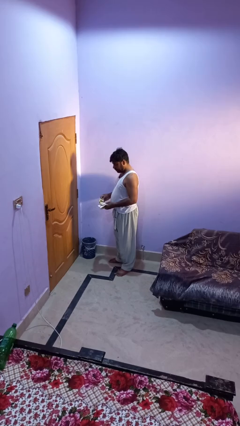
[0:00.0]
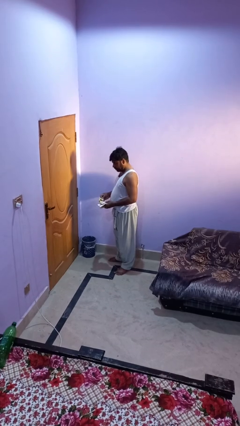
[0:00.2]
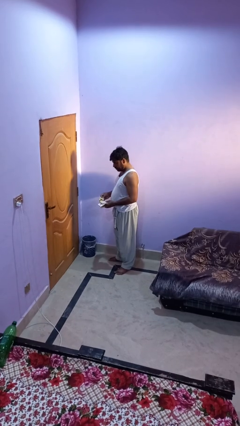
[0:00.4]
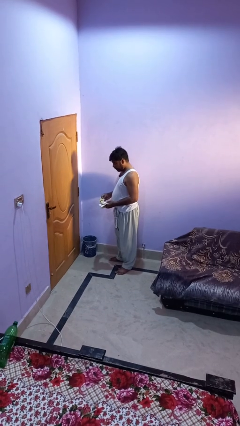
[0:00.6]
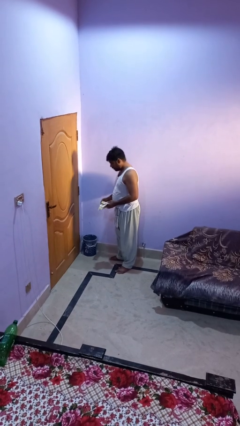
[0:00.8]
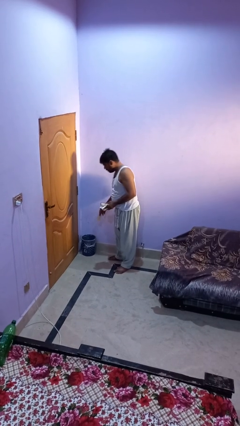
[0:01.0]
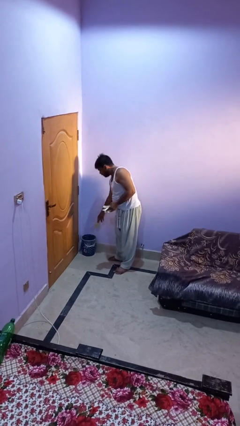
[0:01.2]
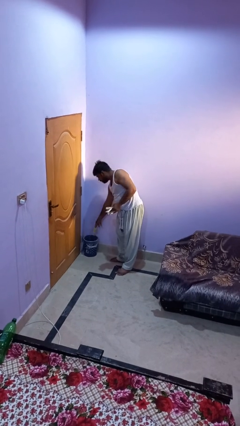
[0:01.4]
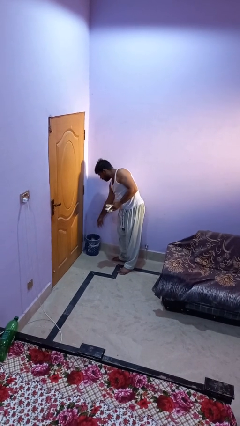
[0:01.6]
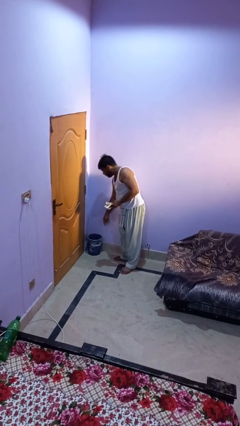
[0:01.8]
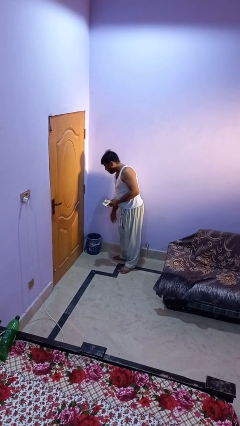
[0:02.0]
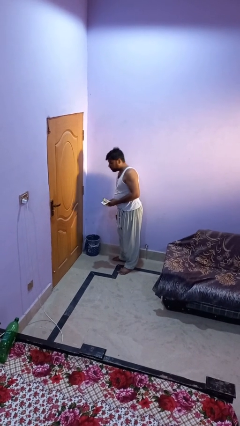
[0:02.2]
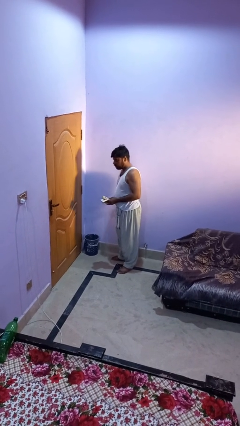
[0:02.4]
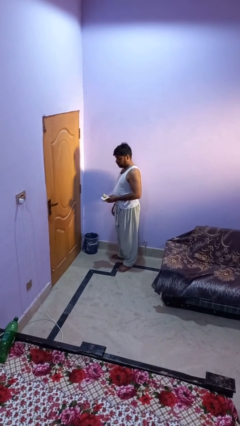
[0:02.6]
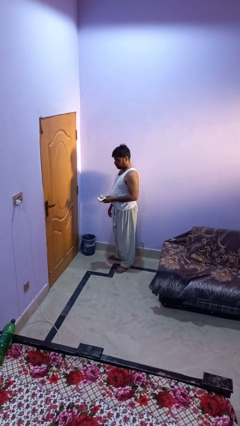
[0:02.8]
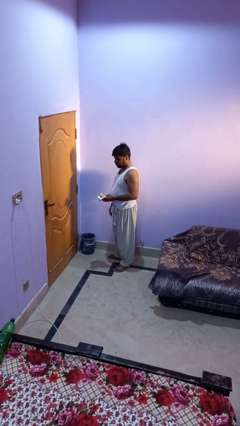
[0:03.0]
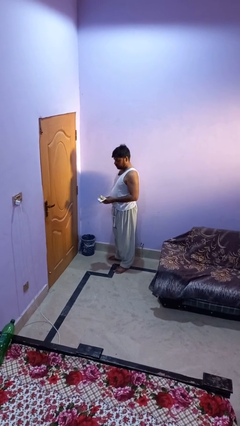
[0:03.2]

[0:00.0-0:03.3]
person discards trash

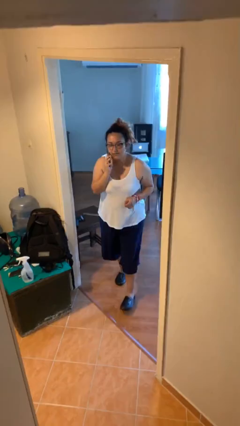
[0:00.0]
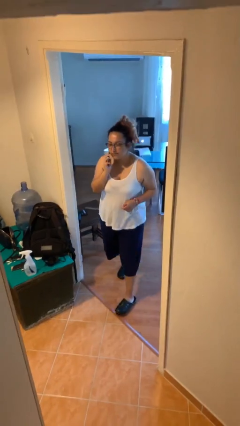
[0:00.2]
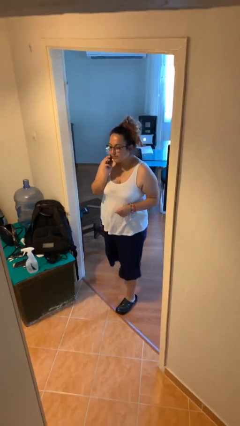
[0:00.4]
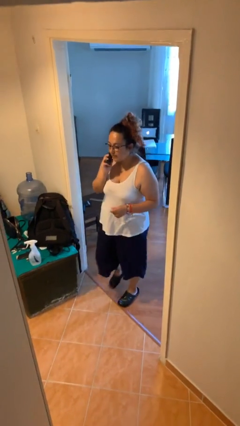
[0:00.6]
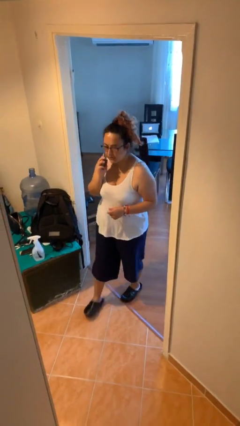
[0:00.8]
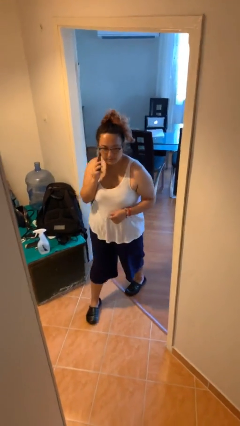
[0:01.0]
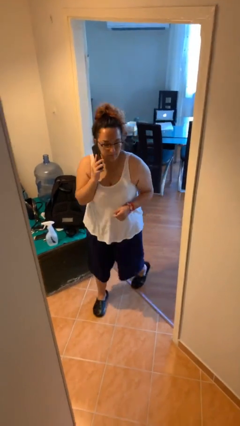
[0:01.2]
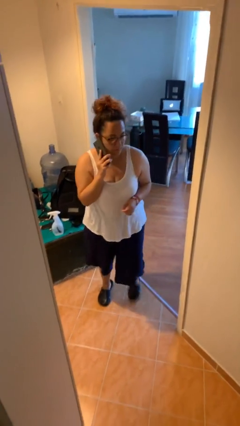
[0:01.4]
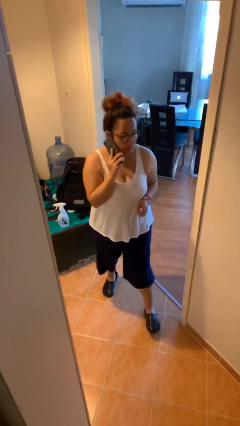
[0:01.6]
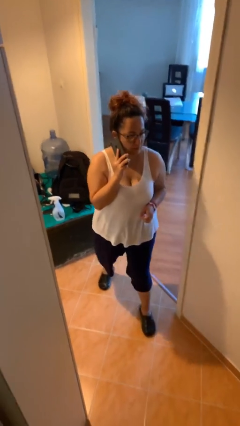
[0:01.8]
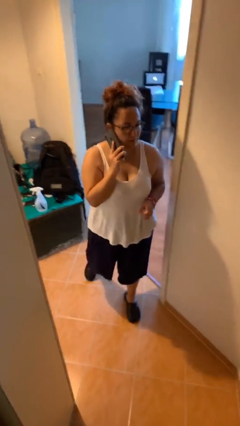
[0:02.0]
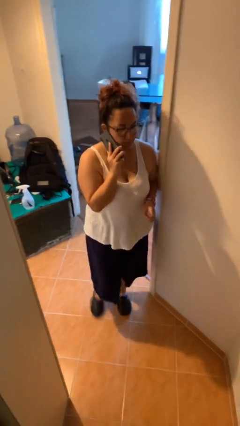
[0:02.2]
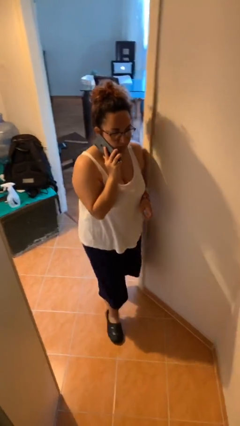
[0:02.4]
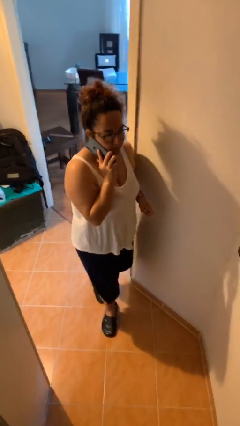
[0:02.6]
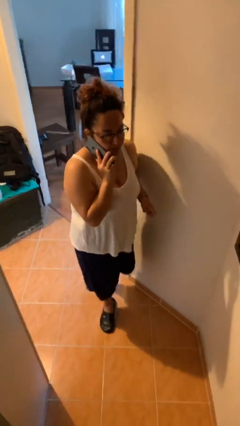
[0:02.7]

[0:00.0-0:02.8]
person enters scene through structure

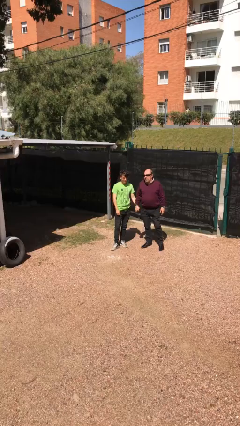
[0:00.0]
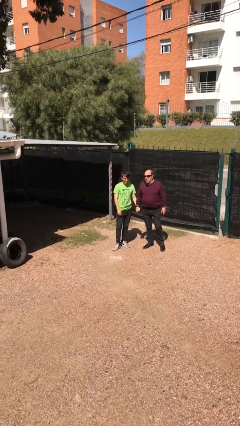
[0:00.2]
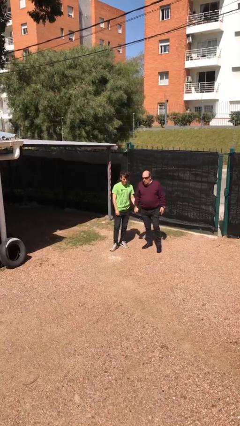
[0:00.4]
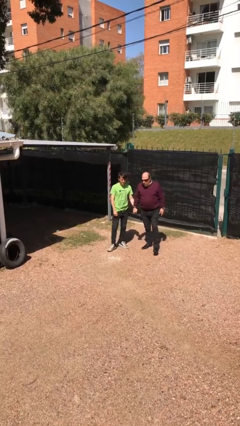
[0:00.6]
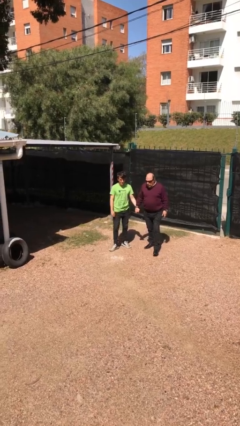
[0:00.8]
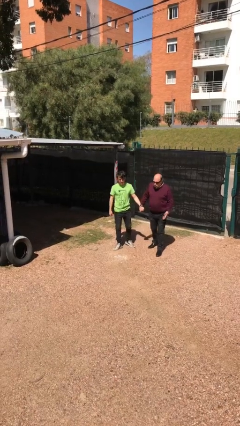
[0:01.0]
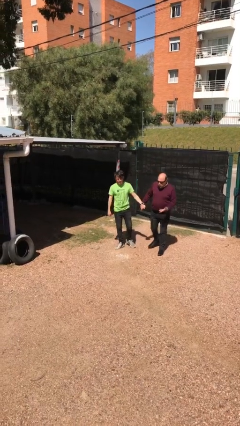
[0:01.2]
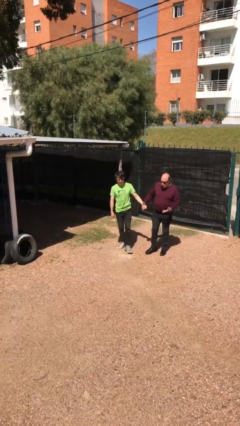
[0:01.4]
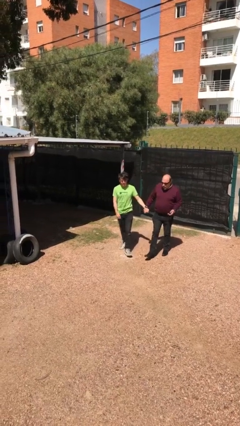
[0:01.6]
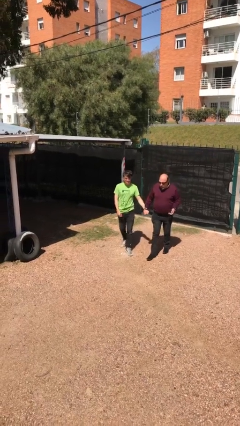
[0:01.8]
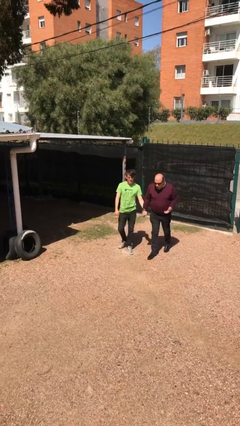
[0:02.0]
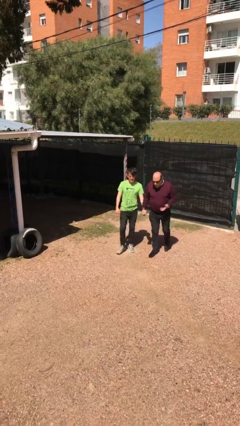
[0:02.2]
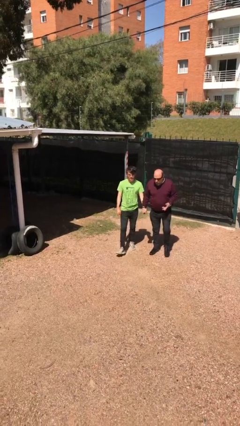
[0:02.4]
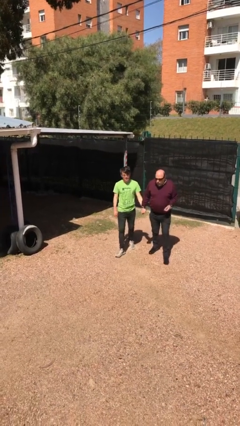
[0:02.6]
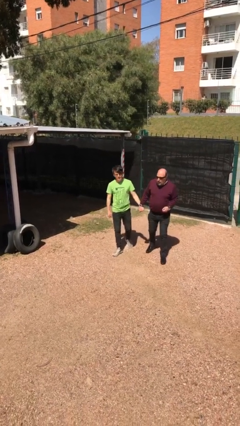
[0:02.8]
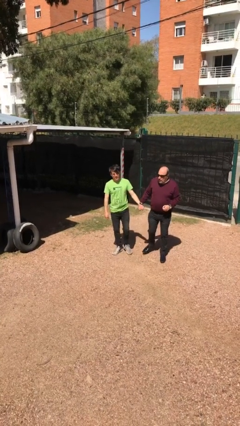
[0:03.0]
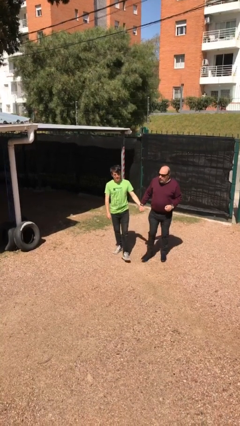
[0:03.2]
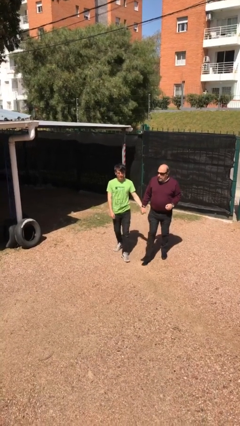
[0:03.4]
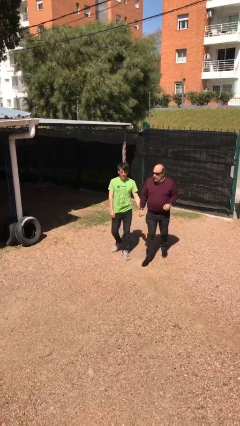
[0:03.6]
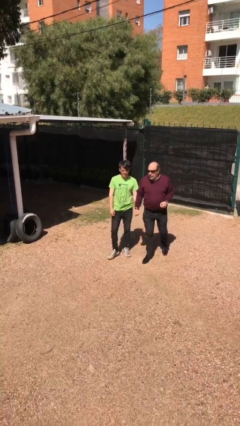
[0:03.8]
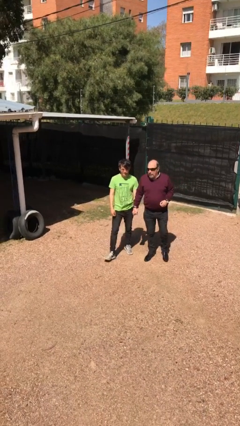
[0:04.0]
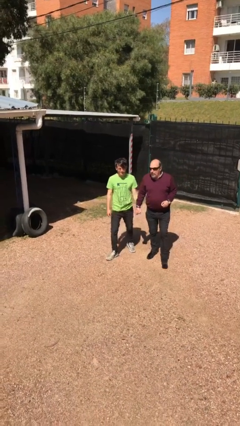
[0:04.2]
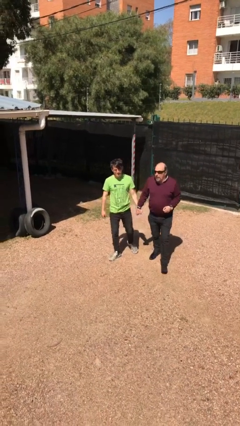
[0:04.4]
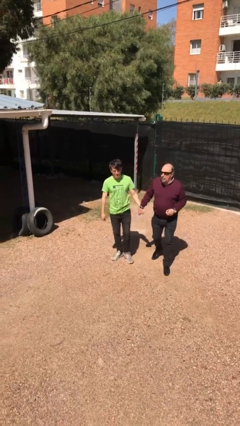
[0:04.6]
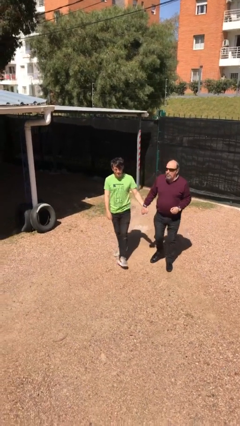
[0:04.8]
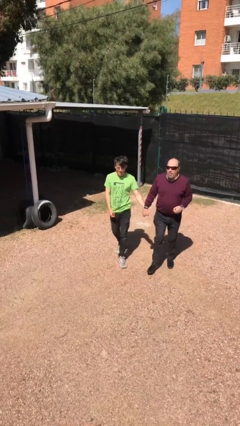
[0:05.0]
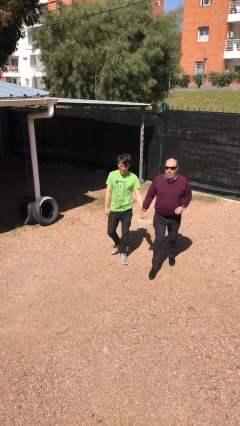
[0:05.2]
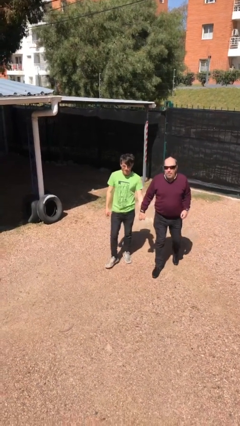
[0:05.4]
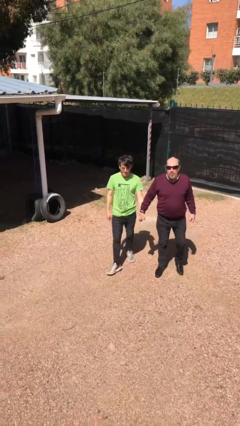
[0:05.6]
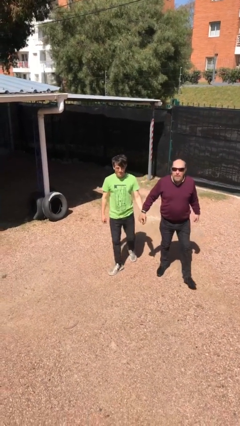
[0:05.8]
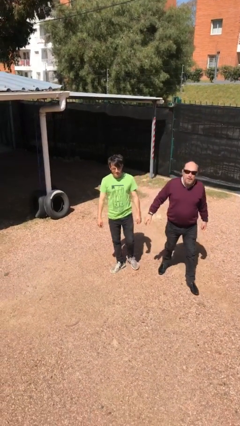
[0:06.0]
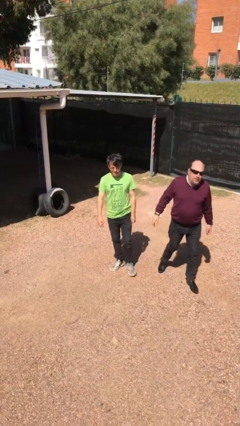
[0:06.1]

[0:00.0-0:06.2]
person holds hand

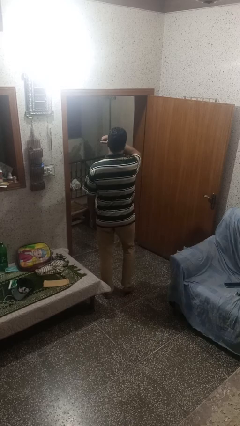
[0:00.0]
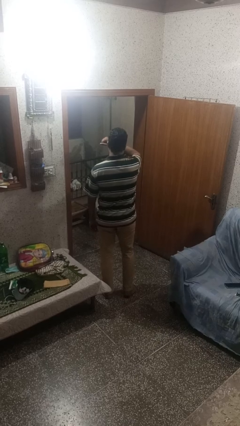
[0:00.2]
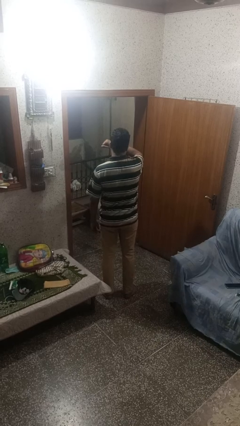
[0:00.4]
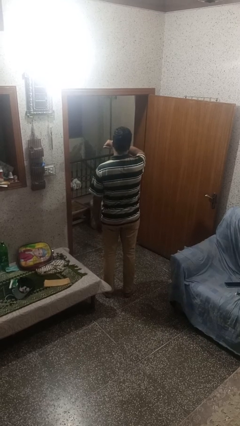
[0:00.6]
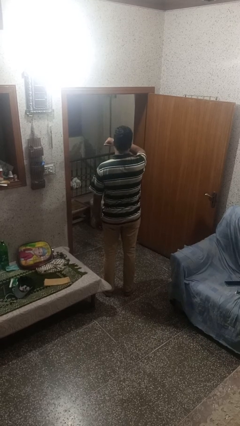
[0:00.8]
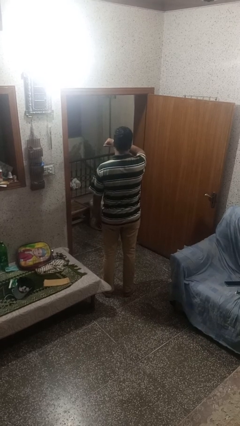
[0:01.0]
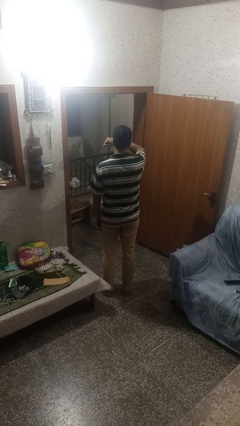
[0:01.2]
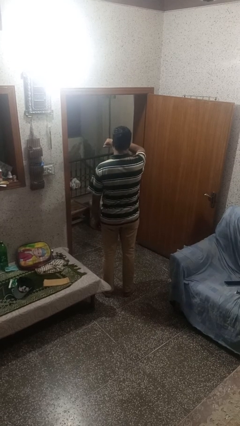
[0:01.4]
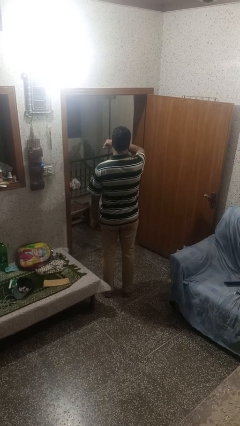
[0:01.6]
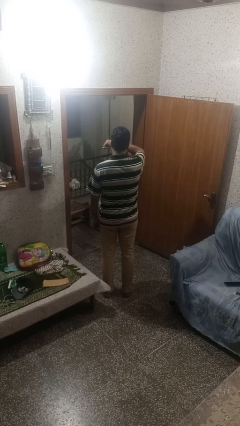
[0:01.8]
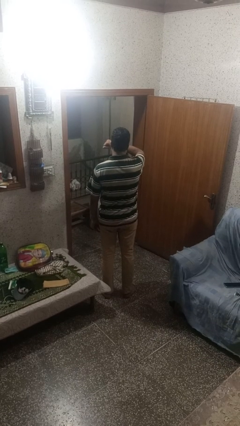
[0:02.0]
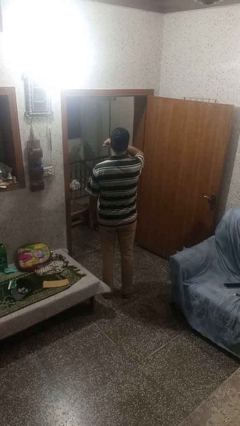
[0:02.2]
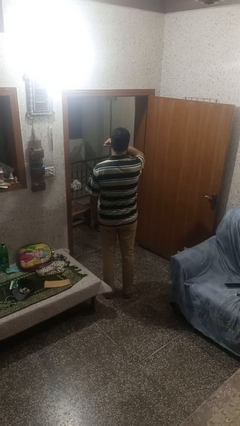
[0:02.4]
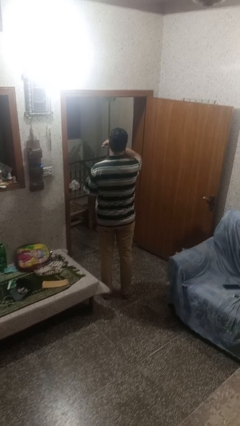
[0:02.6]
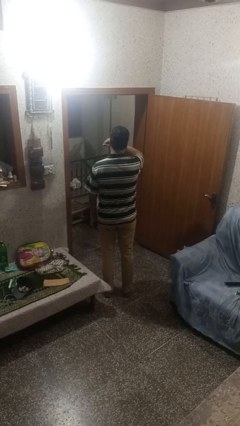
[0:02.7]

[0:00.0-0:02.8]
person karate chop

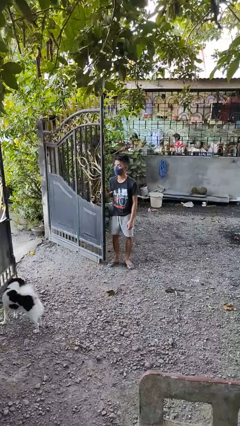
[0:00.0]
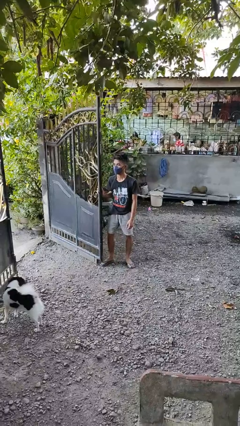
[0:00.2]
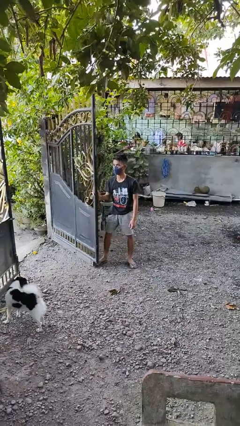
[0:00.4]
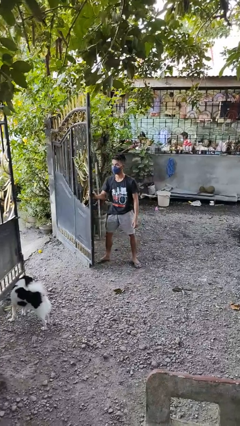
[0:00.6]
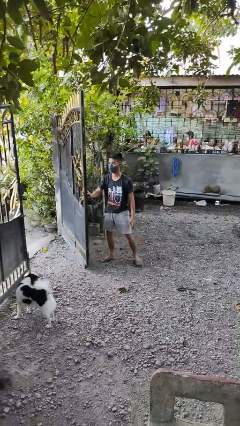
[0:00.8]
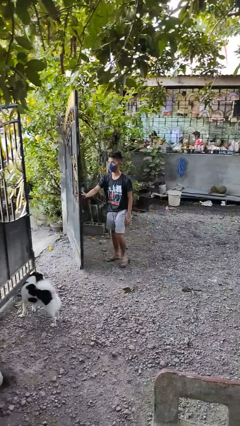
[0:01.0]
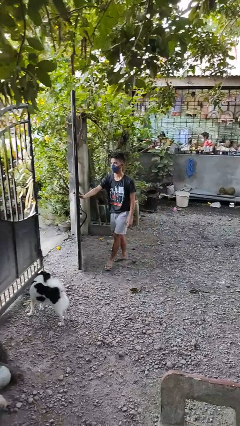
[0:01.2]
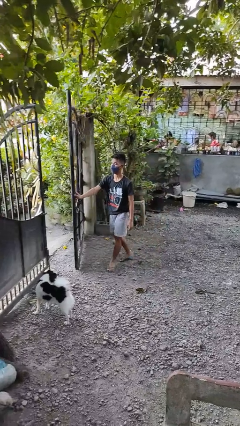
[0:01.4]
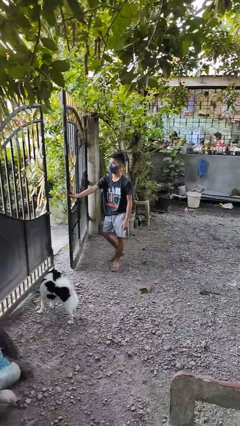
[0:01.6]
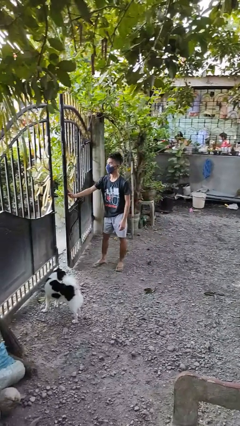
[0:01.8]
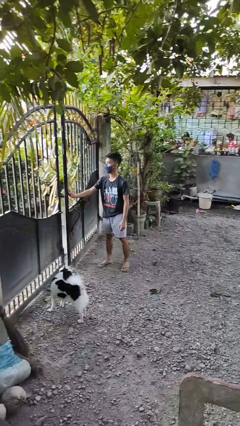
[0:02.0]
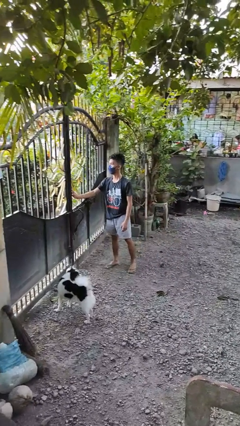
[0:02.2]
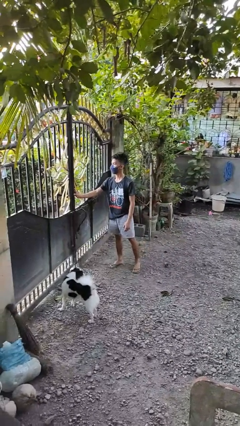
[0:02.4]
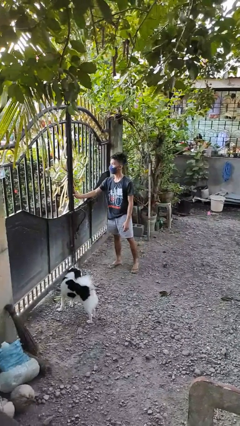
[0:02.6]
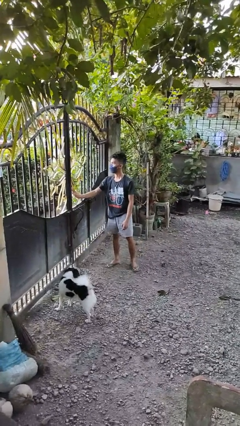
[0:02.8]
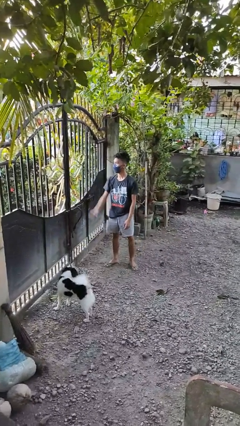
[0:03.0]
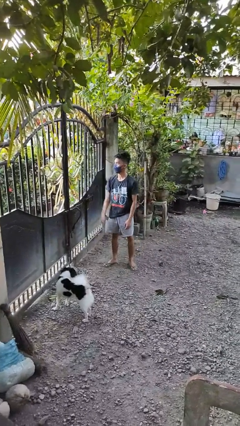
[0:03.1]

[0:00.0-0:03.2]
person closes gate
